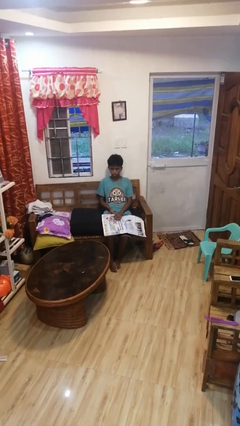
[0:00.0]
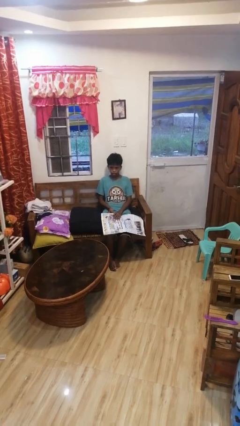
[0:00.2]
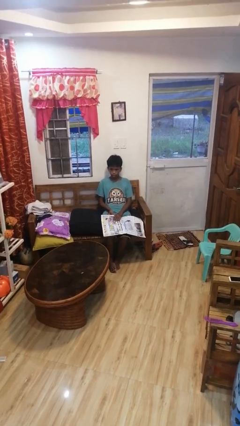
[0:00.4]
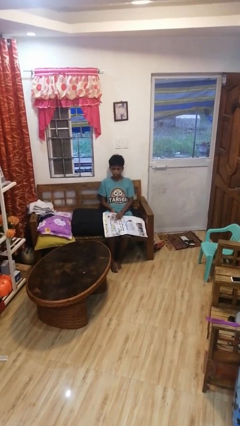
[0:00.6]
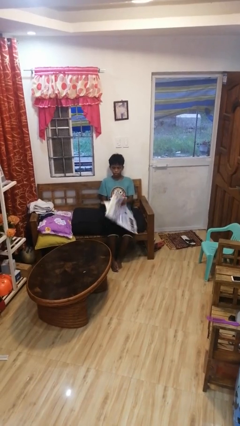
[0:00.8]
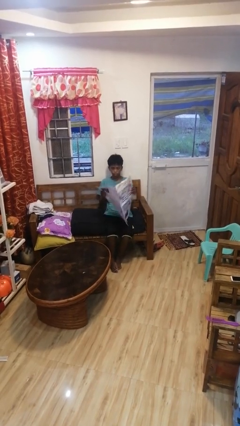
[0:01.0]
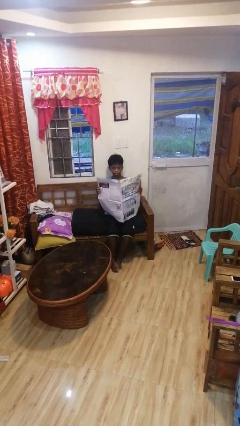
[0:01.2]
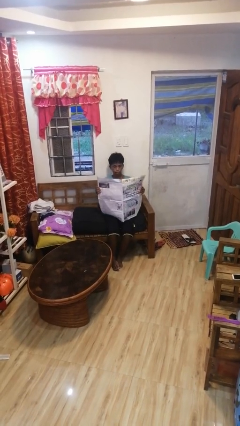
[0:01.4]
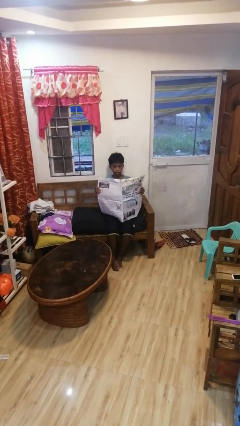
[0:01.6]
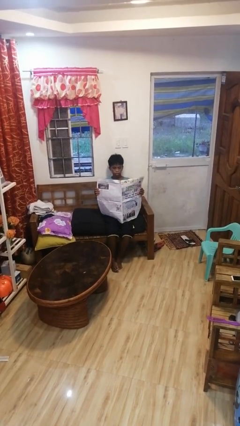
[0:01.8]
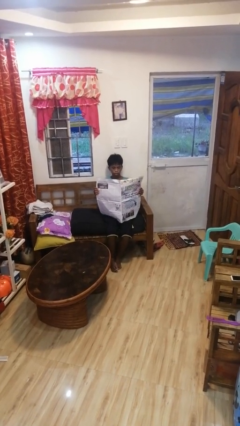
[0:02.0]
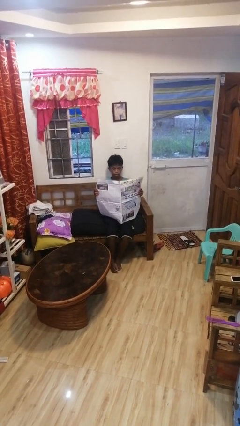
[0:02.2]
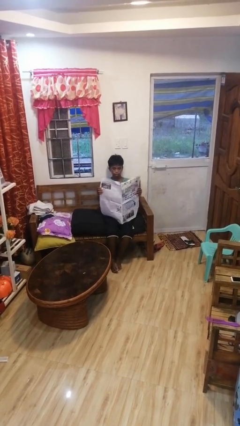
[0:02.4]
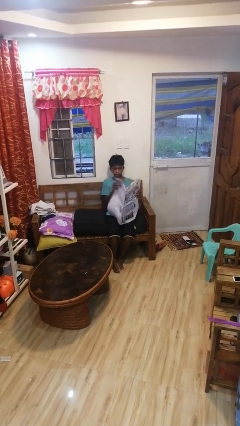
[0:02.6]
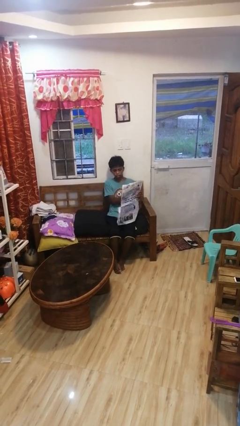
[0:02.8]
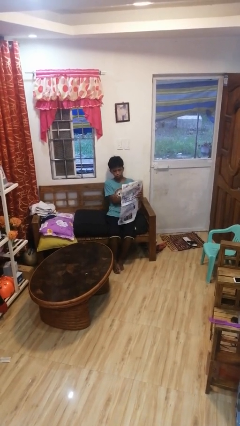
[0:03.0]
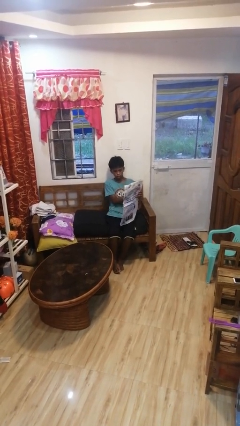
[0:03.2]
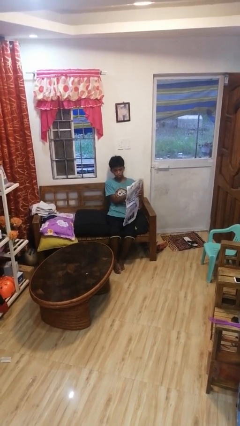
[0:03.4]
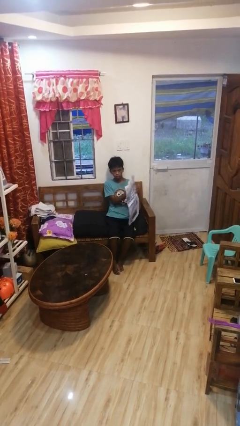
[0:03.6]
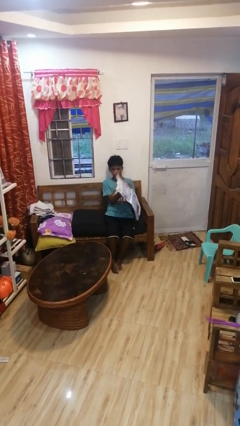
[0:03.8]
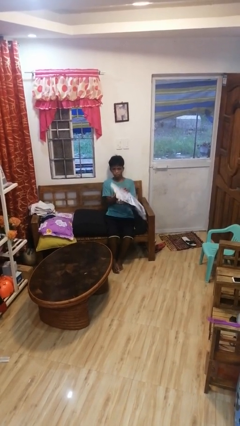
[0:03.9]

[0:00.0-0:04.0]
person reads newspaper

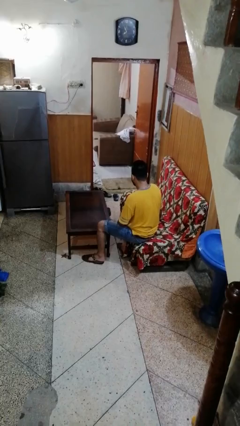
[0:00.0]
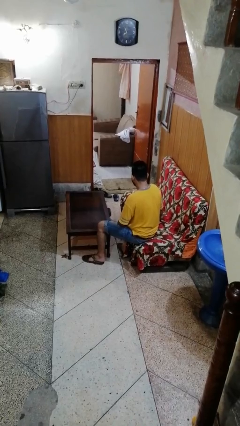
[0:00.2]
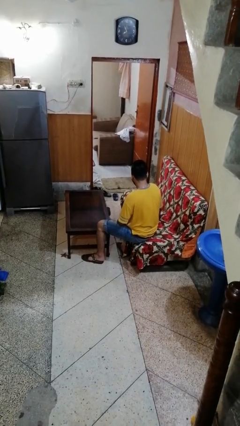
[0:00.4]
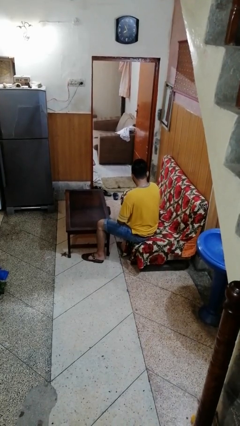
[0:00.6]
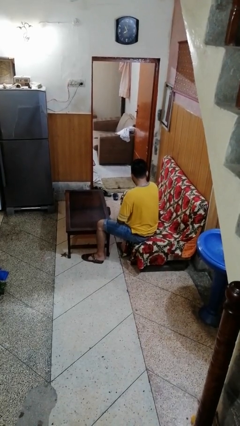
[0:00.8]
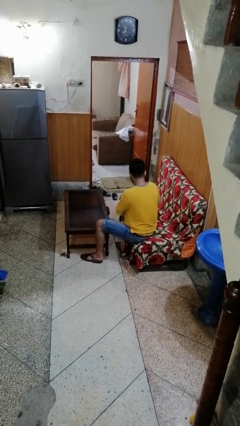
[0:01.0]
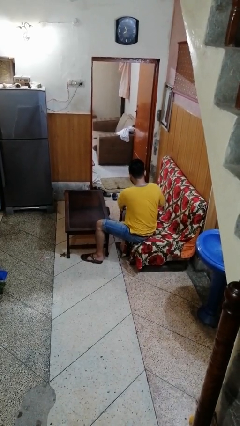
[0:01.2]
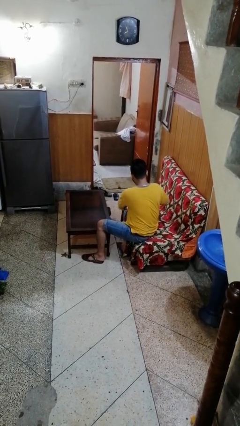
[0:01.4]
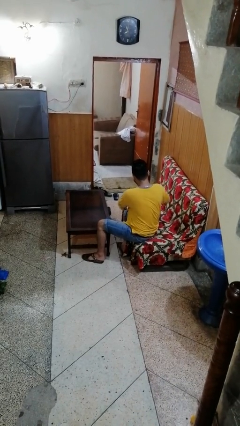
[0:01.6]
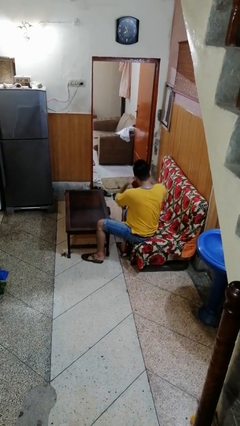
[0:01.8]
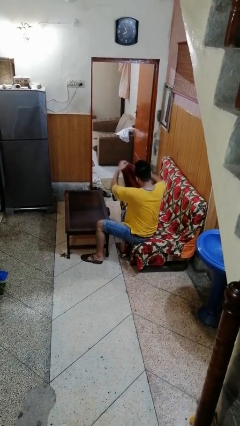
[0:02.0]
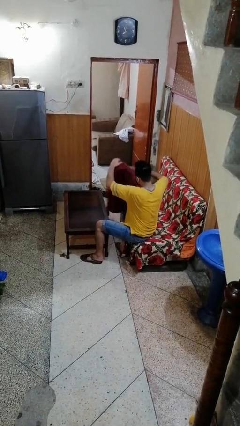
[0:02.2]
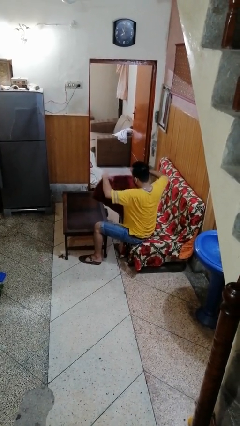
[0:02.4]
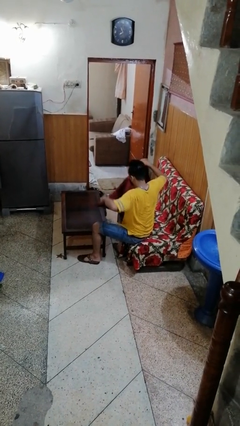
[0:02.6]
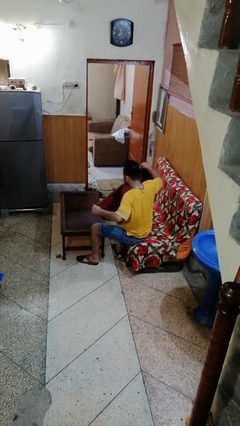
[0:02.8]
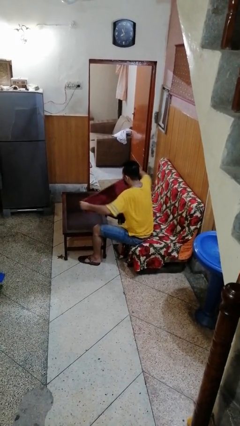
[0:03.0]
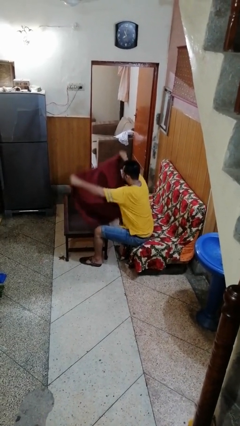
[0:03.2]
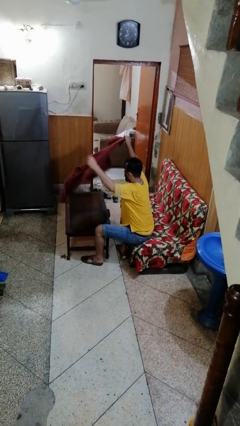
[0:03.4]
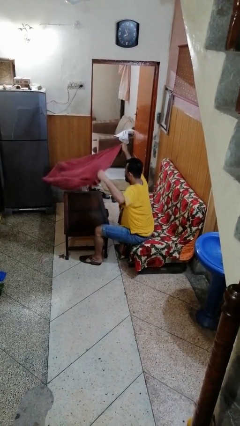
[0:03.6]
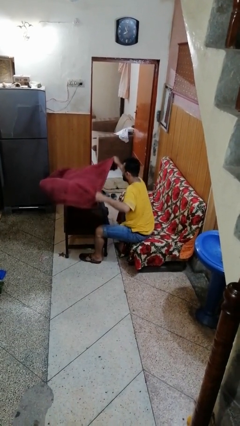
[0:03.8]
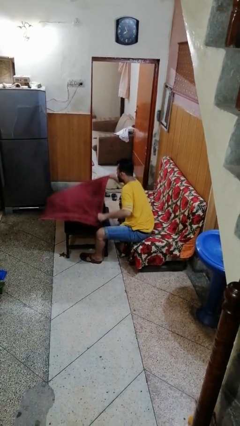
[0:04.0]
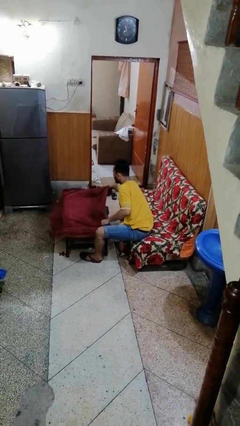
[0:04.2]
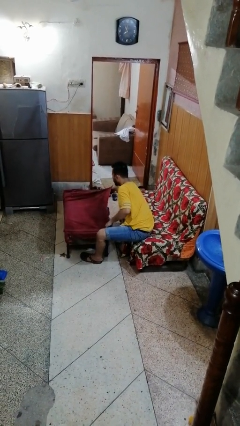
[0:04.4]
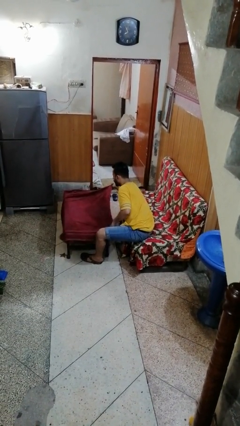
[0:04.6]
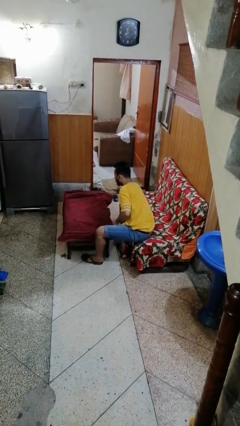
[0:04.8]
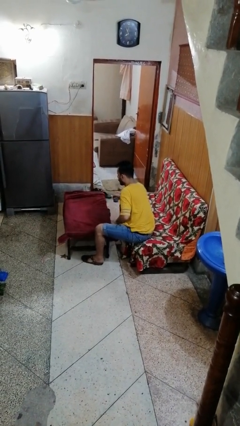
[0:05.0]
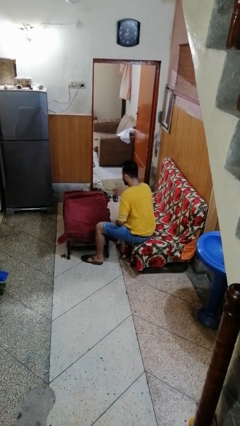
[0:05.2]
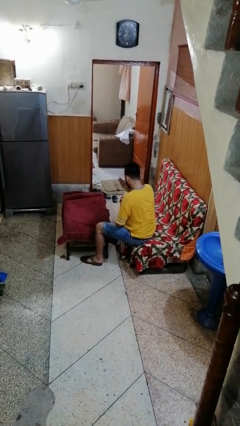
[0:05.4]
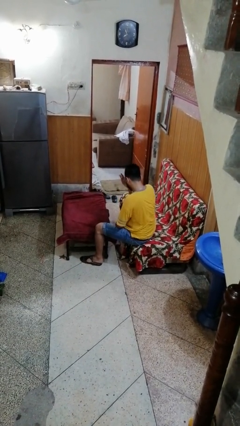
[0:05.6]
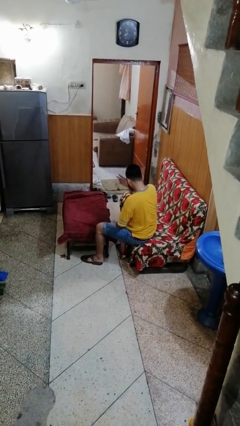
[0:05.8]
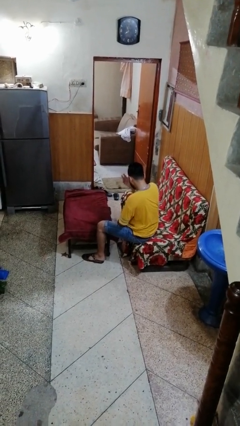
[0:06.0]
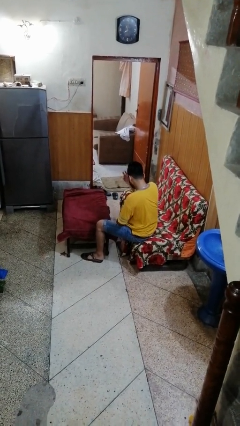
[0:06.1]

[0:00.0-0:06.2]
person spreads tablecloth

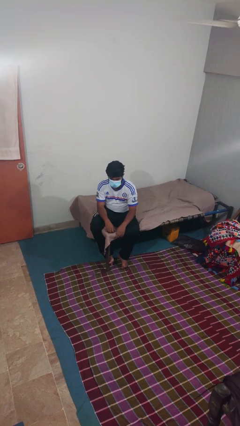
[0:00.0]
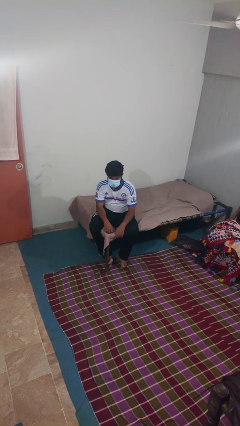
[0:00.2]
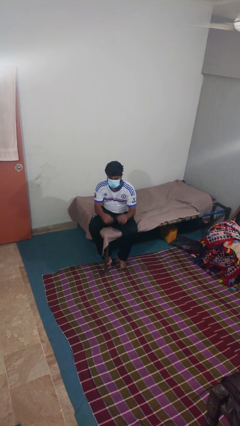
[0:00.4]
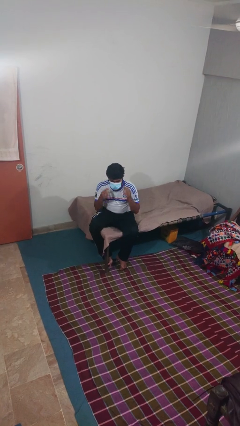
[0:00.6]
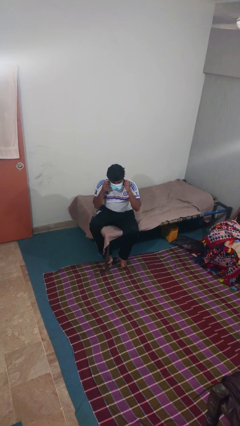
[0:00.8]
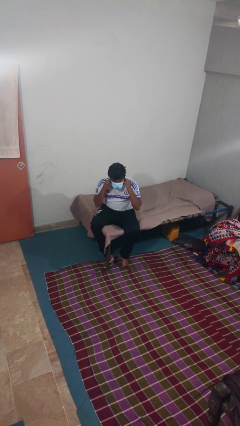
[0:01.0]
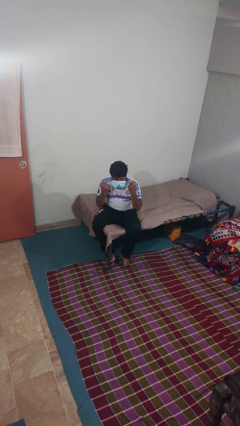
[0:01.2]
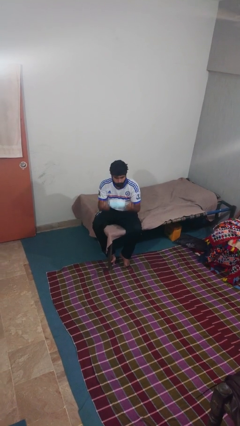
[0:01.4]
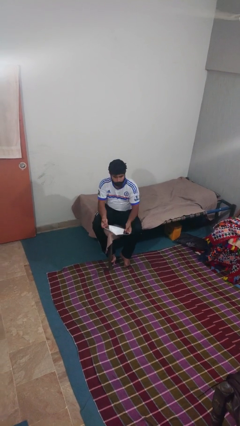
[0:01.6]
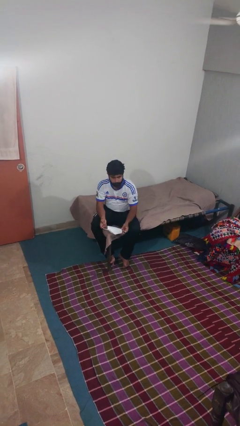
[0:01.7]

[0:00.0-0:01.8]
person takes off facemask

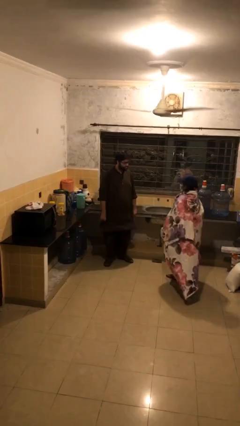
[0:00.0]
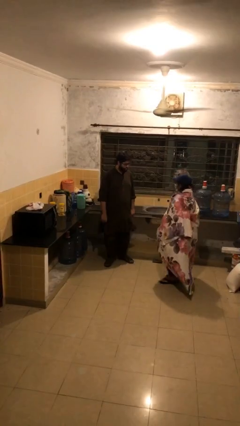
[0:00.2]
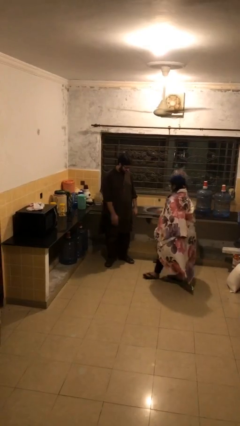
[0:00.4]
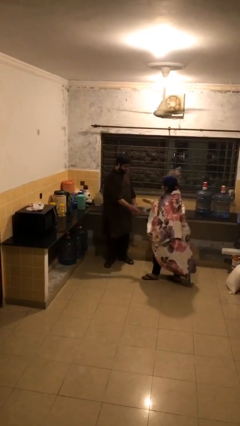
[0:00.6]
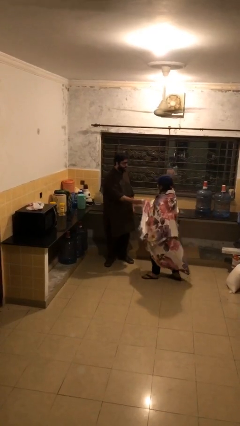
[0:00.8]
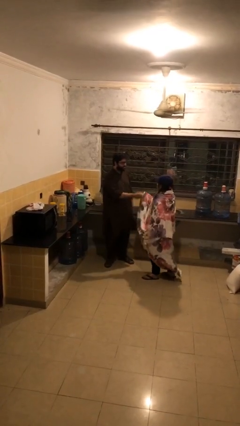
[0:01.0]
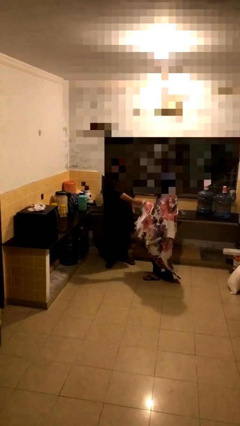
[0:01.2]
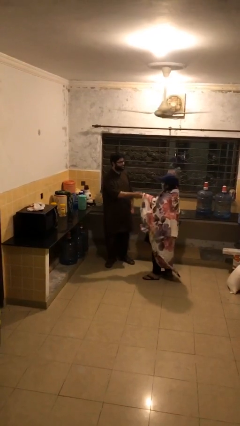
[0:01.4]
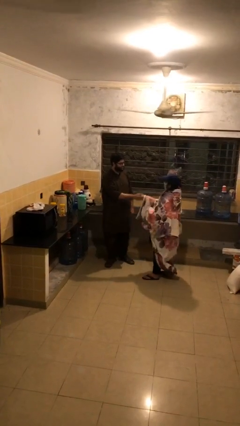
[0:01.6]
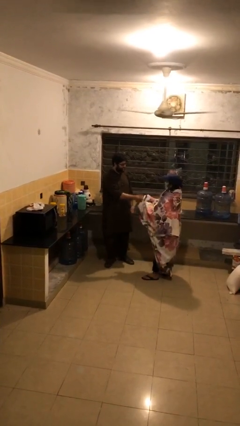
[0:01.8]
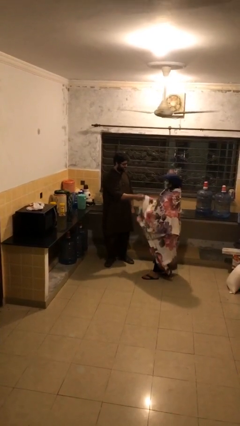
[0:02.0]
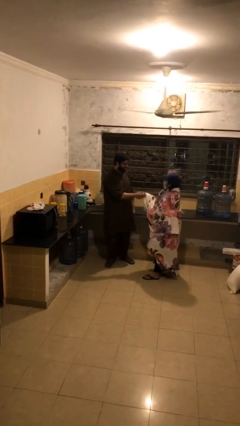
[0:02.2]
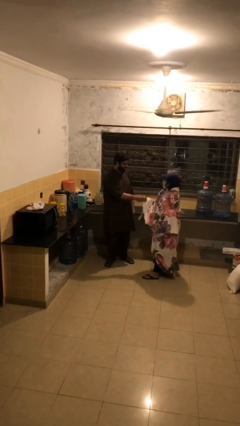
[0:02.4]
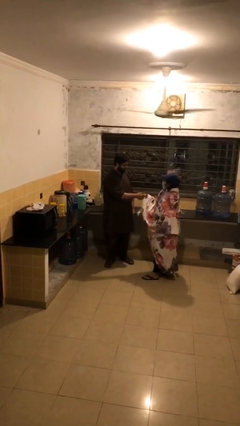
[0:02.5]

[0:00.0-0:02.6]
person shakes hand

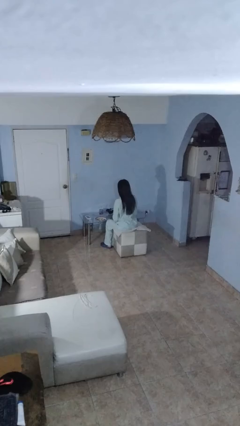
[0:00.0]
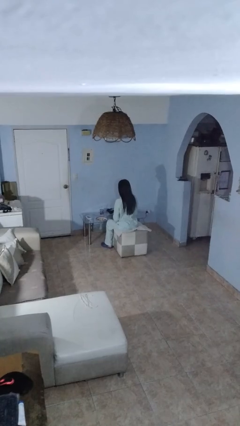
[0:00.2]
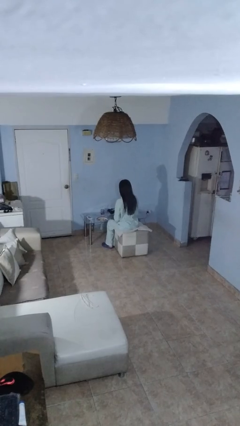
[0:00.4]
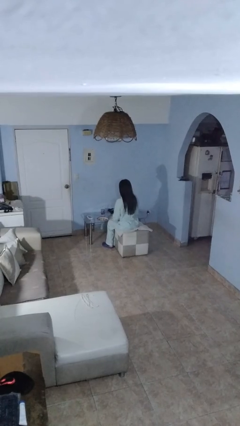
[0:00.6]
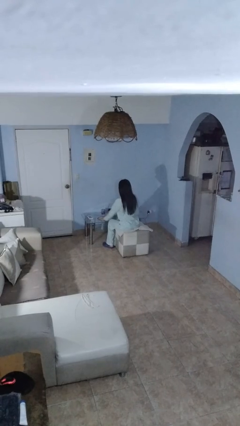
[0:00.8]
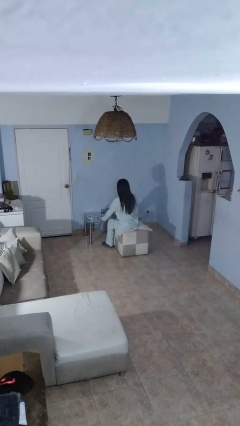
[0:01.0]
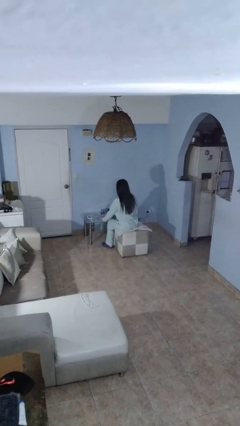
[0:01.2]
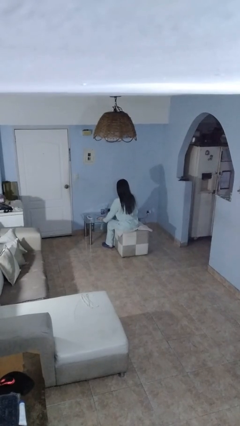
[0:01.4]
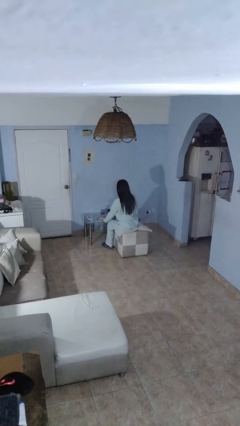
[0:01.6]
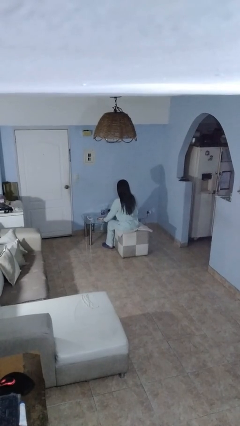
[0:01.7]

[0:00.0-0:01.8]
person turns off lamp

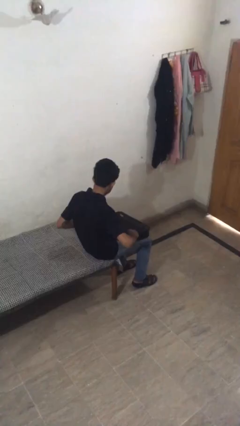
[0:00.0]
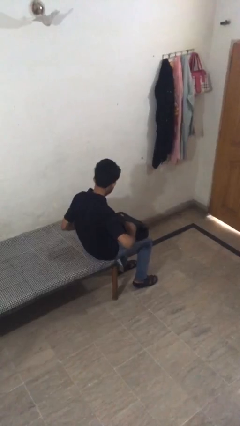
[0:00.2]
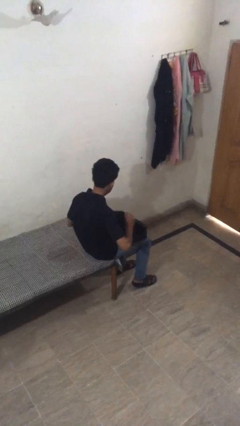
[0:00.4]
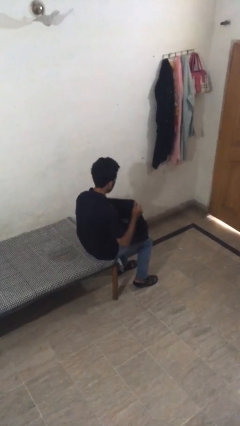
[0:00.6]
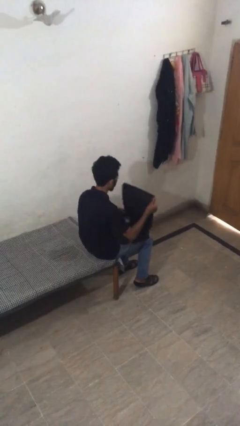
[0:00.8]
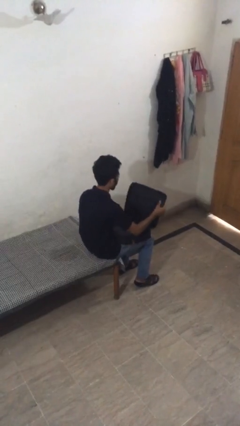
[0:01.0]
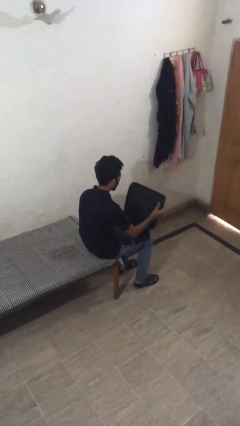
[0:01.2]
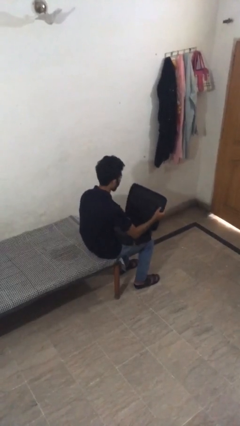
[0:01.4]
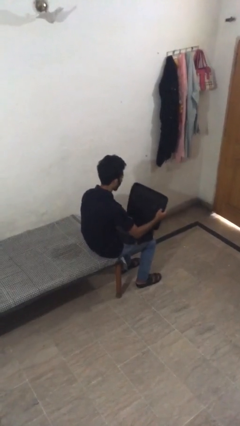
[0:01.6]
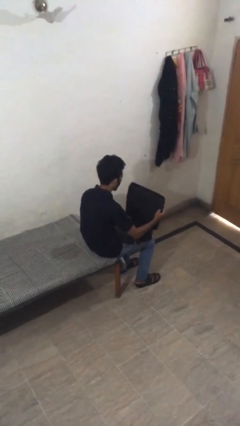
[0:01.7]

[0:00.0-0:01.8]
person opens suitcase
